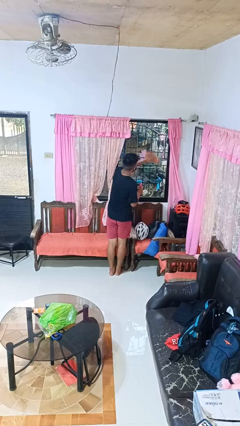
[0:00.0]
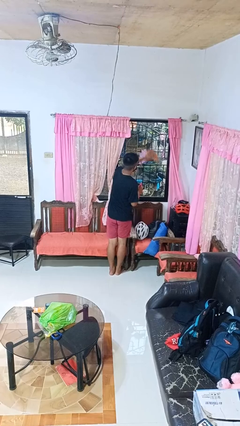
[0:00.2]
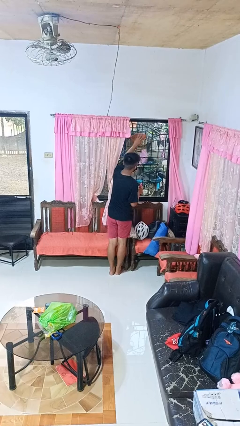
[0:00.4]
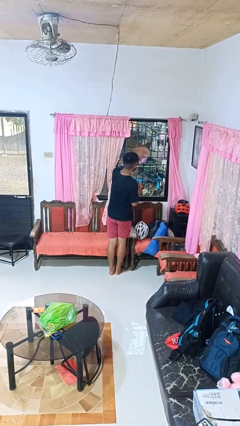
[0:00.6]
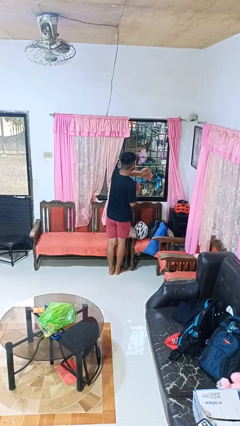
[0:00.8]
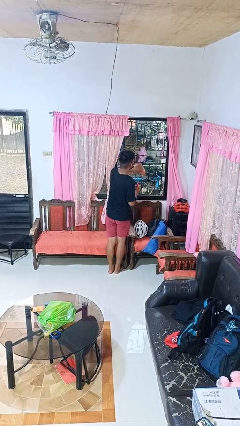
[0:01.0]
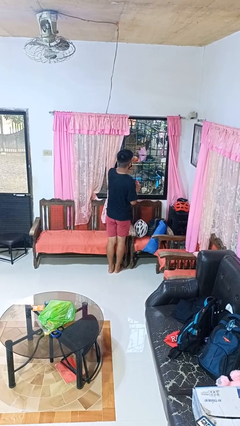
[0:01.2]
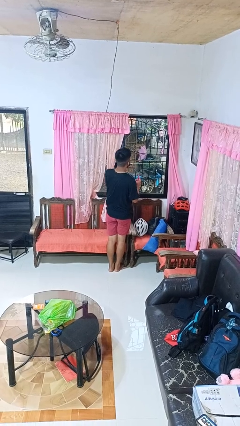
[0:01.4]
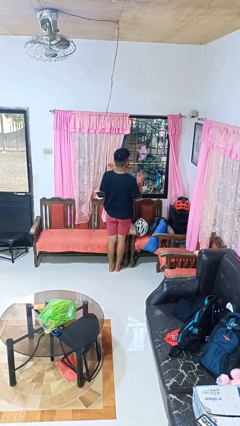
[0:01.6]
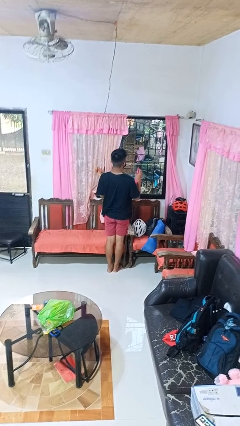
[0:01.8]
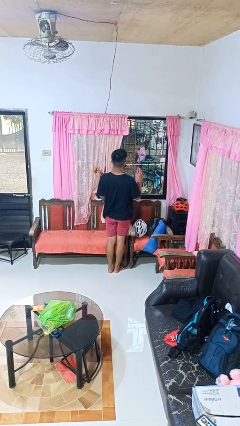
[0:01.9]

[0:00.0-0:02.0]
person washes window

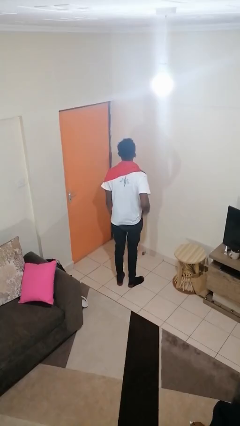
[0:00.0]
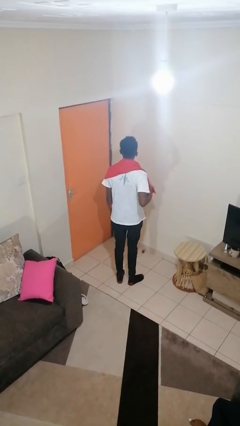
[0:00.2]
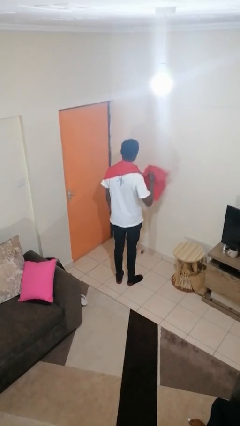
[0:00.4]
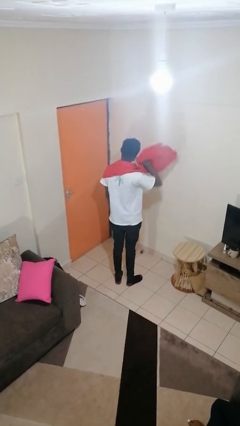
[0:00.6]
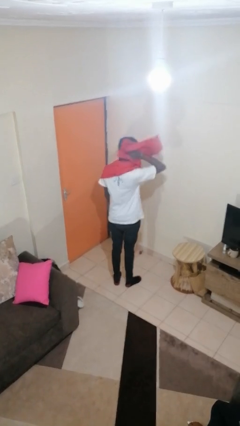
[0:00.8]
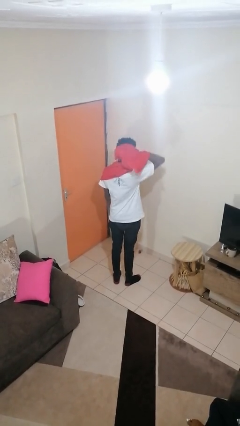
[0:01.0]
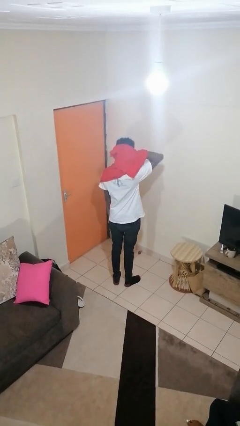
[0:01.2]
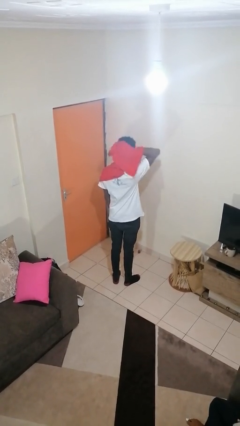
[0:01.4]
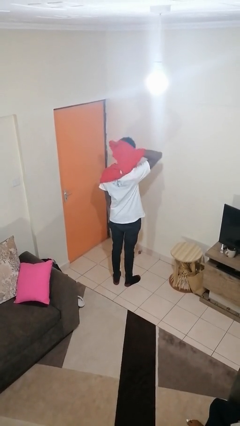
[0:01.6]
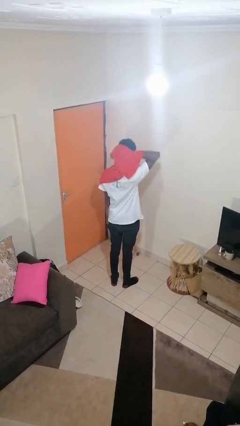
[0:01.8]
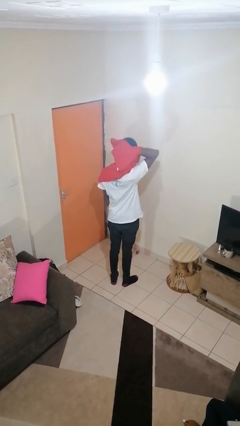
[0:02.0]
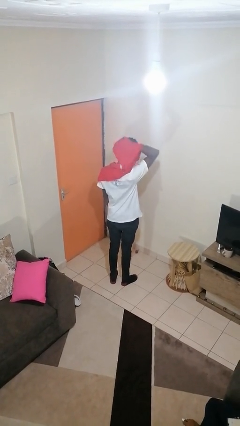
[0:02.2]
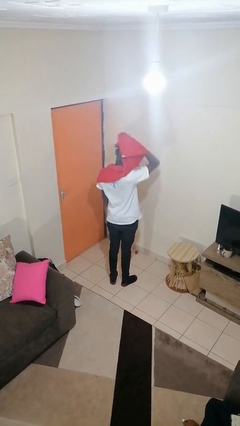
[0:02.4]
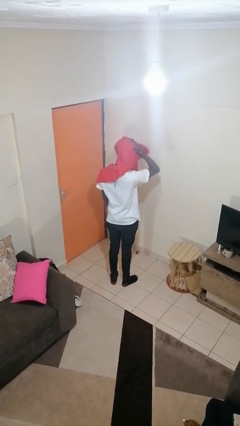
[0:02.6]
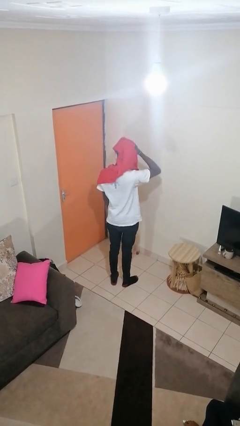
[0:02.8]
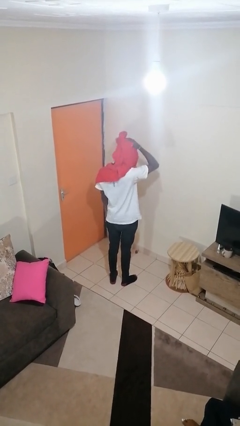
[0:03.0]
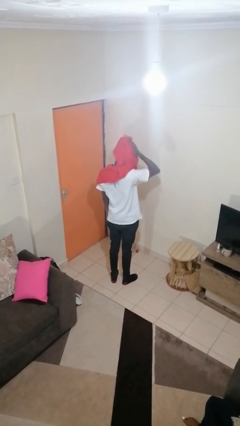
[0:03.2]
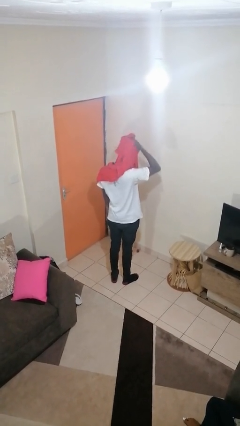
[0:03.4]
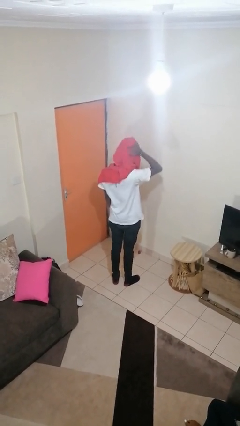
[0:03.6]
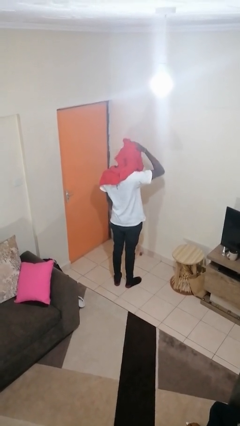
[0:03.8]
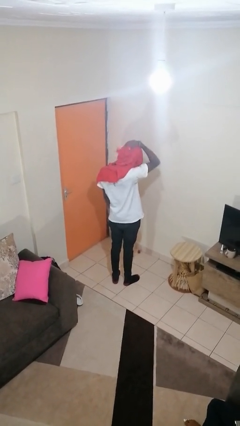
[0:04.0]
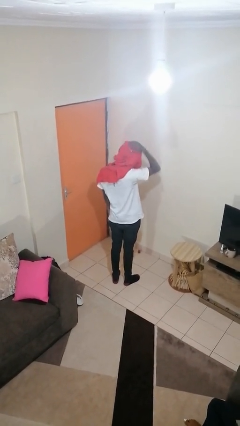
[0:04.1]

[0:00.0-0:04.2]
person dries hair with towel

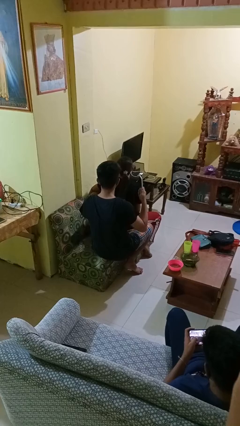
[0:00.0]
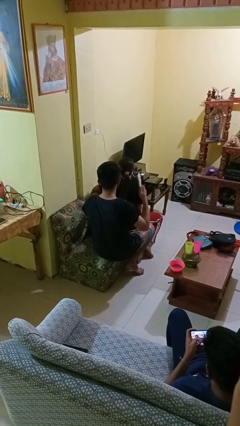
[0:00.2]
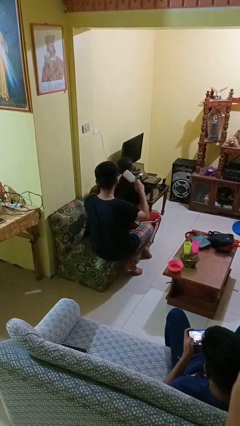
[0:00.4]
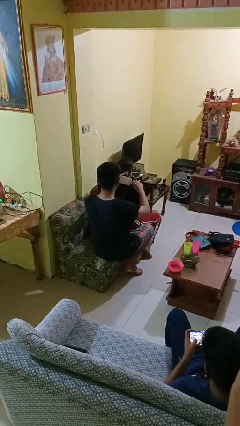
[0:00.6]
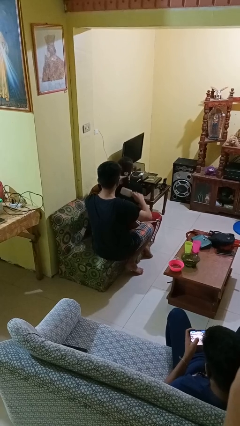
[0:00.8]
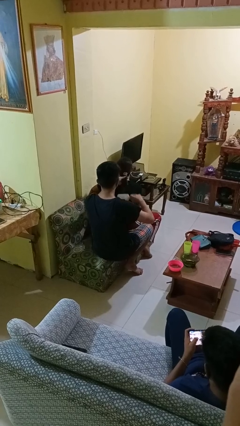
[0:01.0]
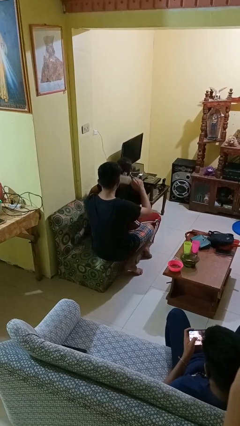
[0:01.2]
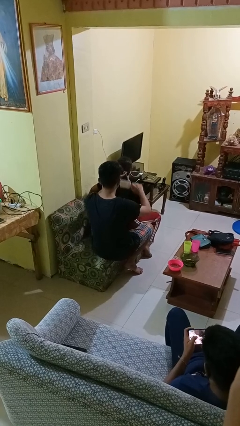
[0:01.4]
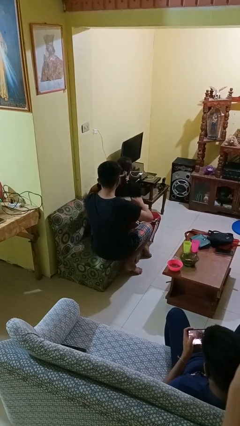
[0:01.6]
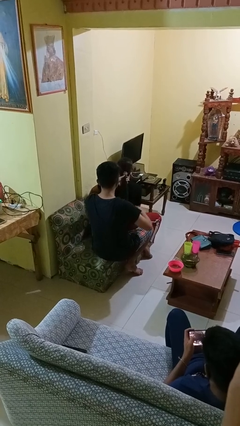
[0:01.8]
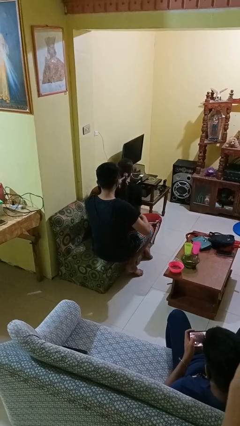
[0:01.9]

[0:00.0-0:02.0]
person brushes hair of person

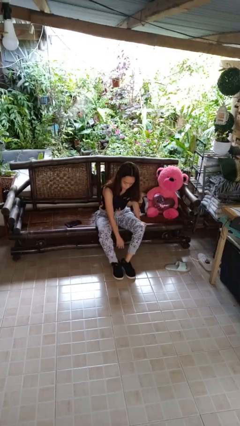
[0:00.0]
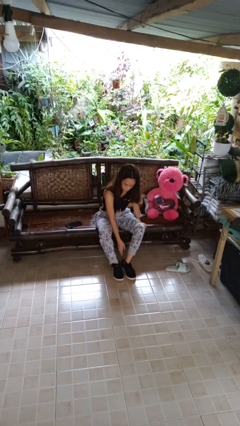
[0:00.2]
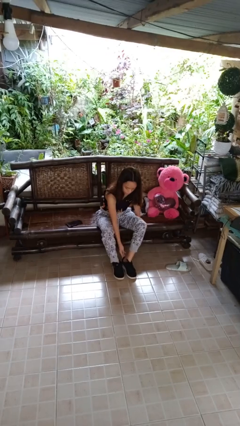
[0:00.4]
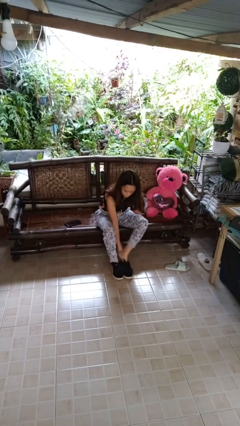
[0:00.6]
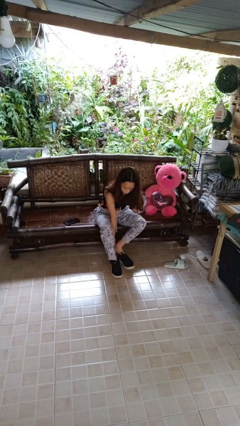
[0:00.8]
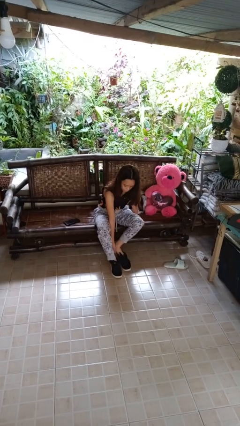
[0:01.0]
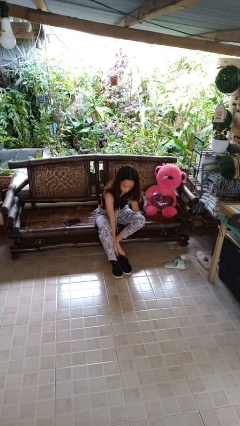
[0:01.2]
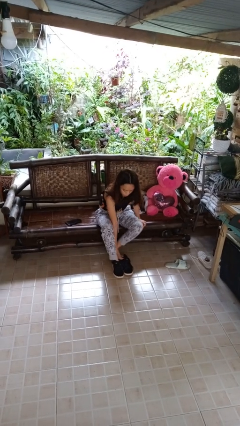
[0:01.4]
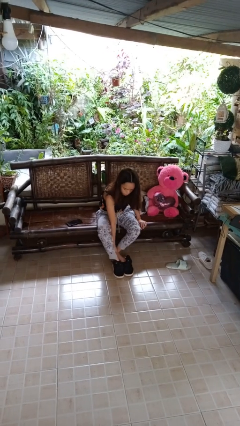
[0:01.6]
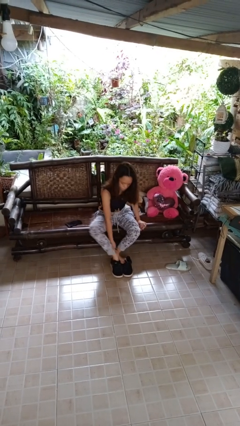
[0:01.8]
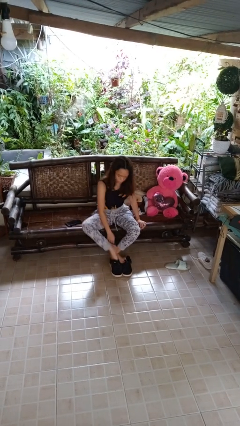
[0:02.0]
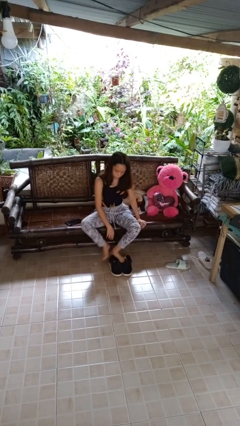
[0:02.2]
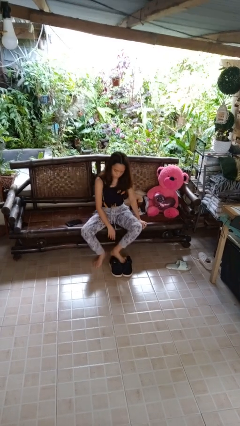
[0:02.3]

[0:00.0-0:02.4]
person takes off shoes

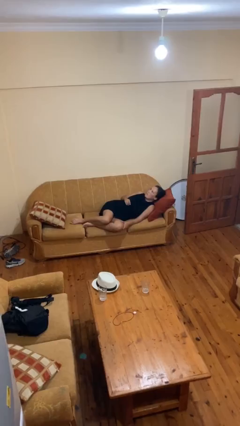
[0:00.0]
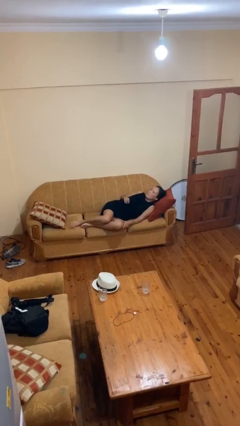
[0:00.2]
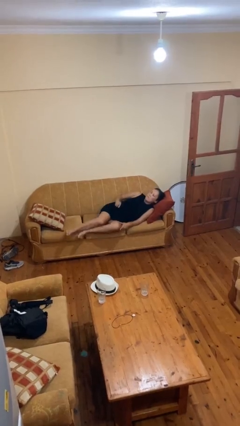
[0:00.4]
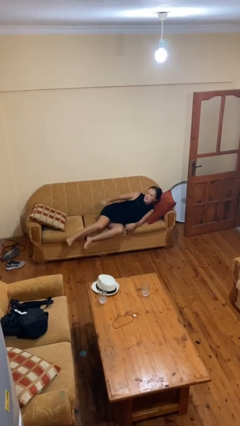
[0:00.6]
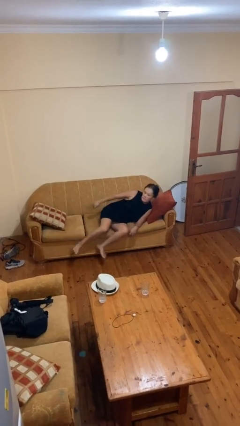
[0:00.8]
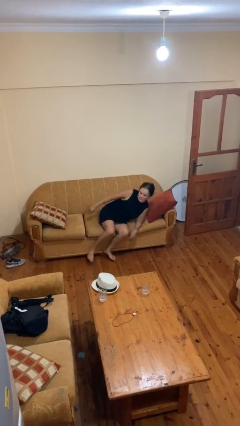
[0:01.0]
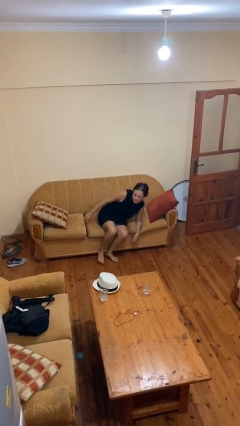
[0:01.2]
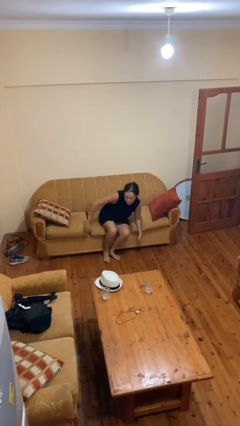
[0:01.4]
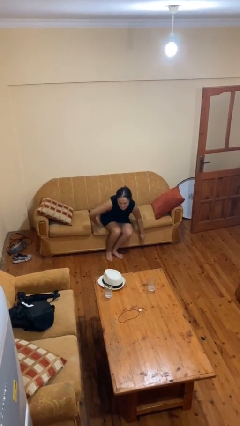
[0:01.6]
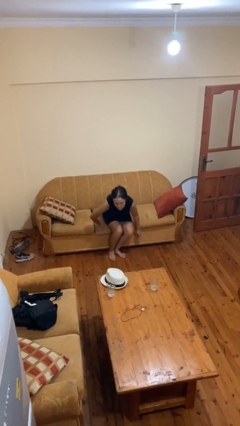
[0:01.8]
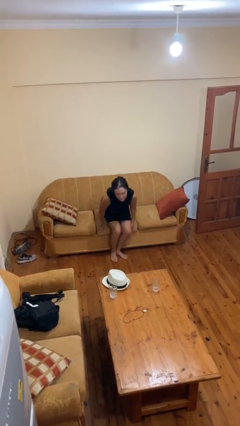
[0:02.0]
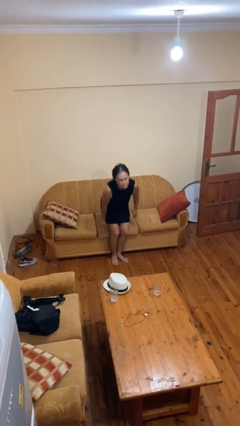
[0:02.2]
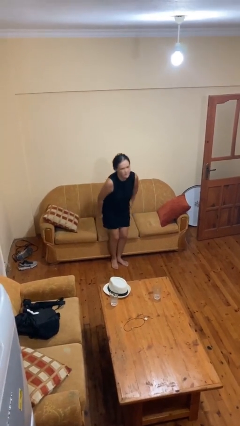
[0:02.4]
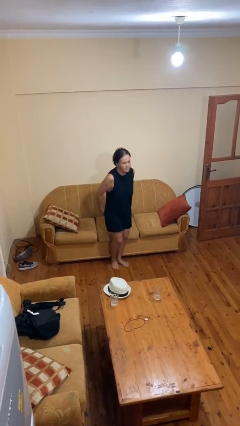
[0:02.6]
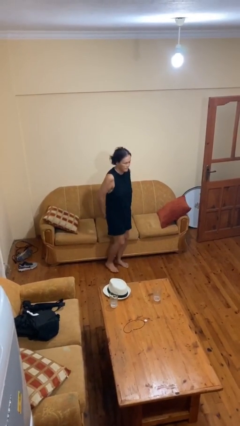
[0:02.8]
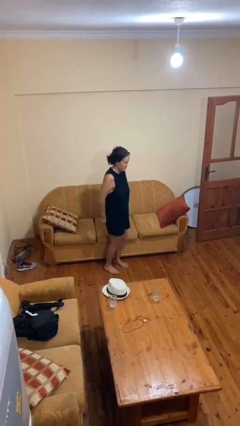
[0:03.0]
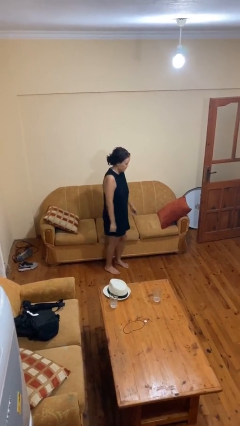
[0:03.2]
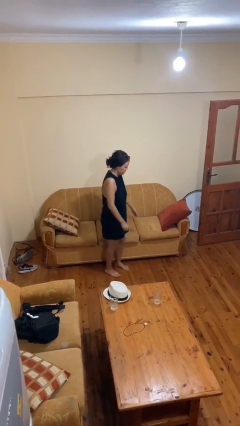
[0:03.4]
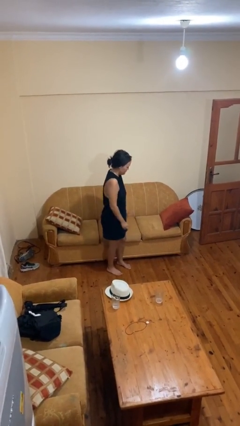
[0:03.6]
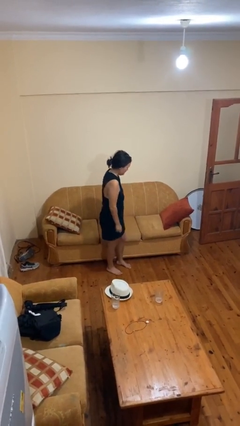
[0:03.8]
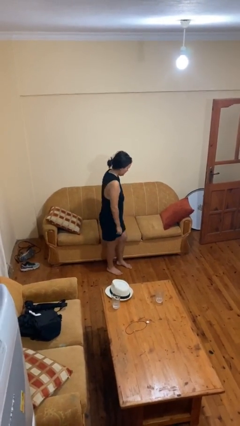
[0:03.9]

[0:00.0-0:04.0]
person stands up

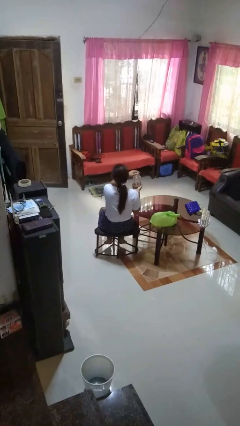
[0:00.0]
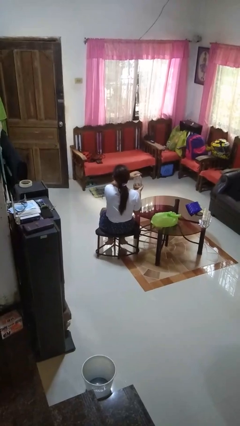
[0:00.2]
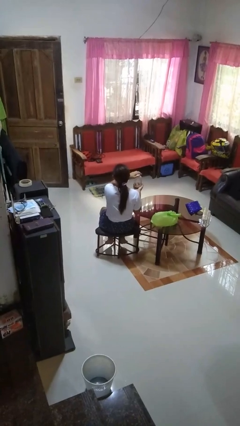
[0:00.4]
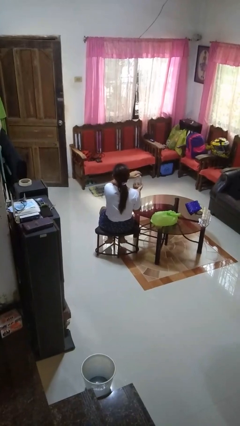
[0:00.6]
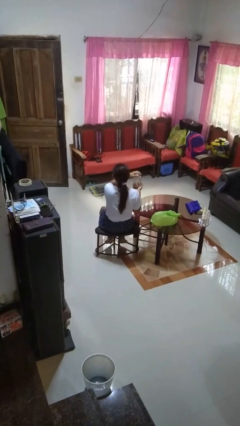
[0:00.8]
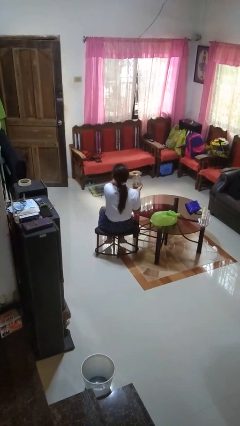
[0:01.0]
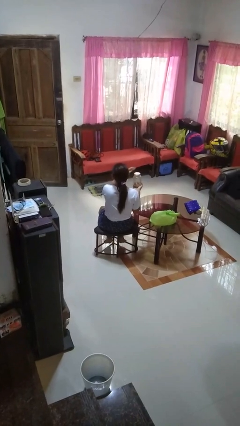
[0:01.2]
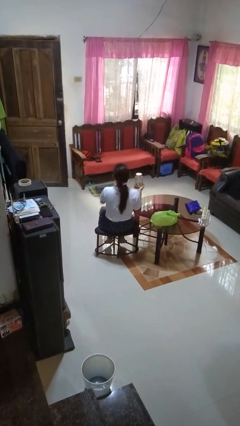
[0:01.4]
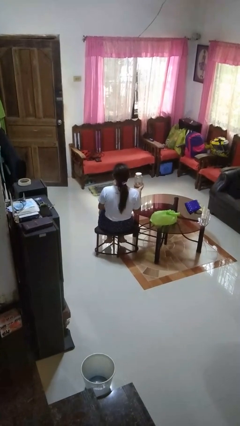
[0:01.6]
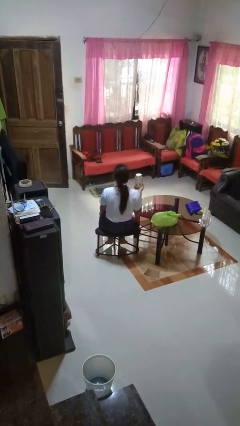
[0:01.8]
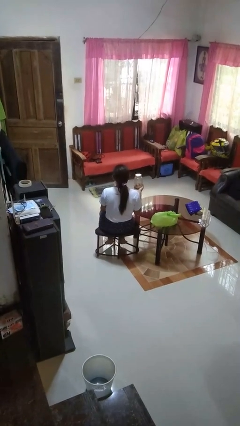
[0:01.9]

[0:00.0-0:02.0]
person closes jar

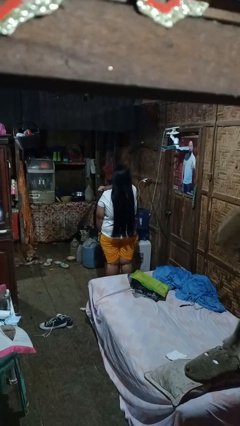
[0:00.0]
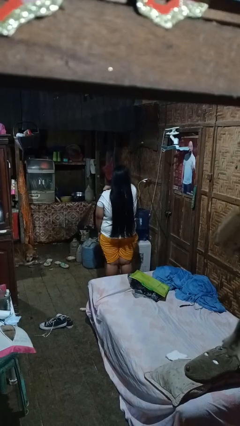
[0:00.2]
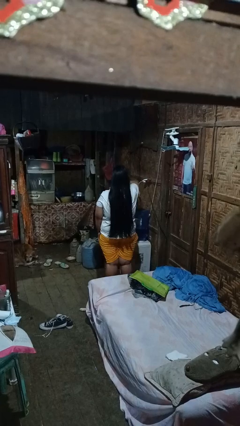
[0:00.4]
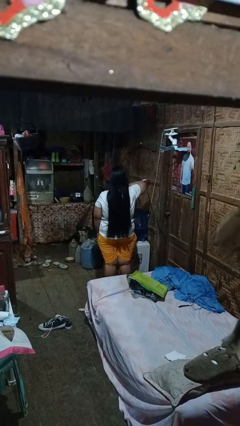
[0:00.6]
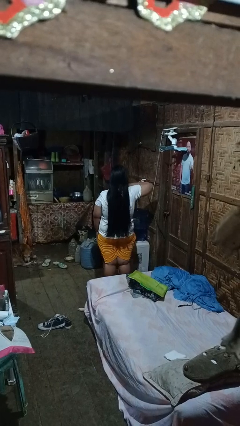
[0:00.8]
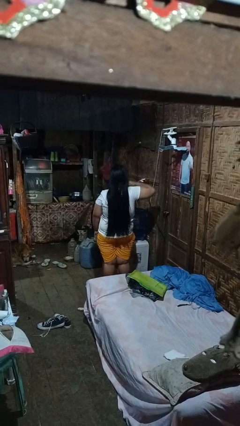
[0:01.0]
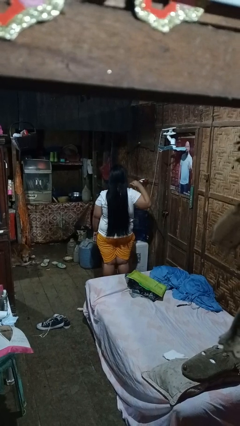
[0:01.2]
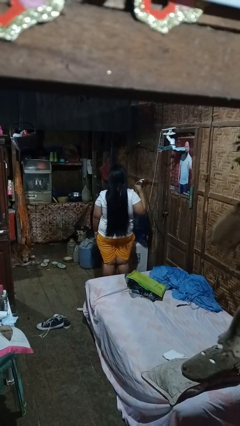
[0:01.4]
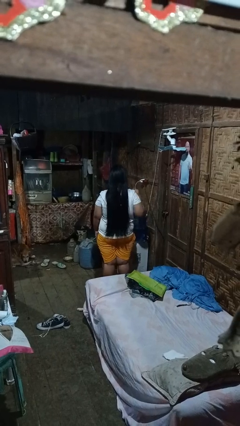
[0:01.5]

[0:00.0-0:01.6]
person gestures cut
